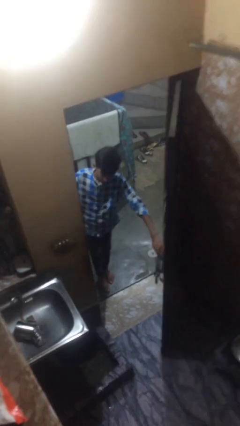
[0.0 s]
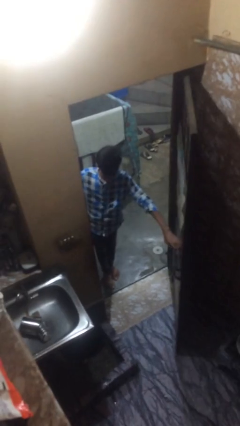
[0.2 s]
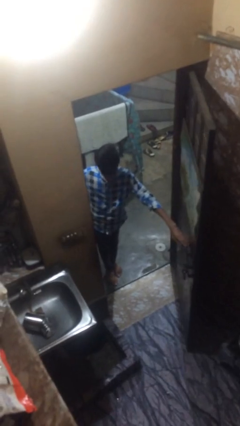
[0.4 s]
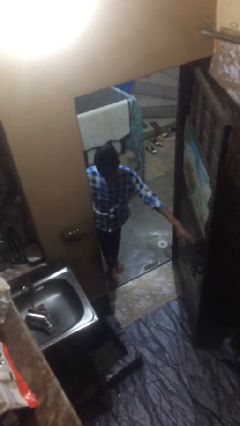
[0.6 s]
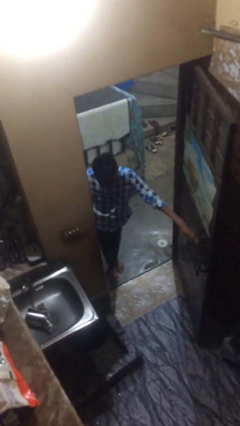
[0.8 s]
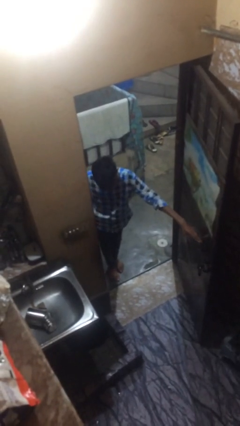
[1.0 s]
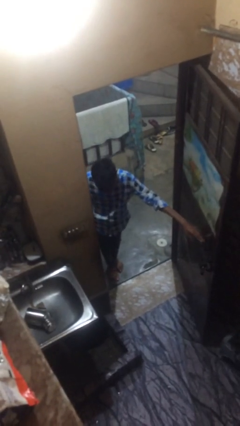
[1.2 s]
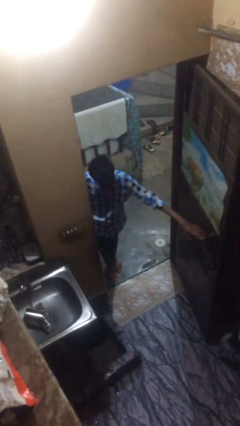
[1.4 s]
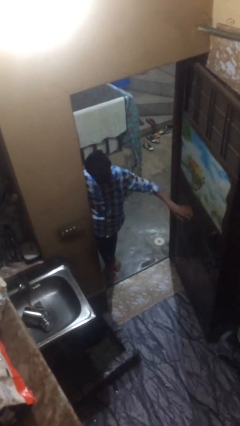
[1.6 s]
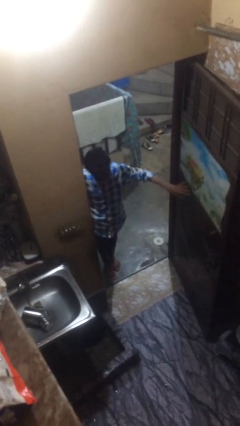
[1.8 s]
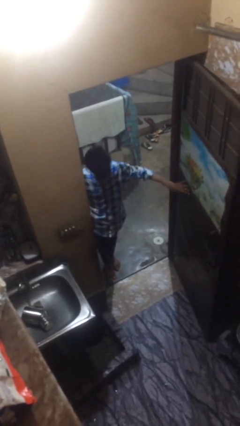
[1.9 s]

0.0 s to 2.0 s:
person opens facility door

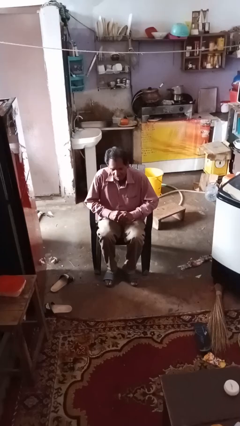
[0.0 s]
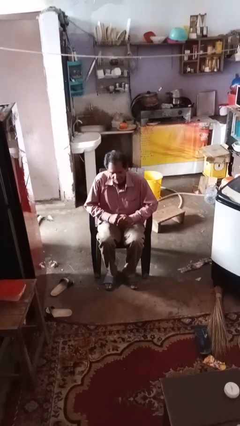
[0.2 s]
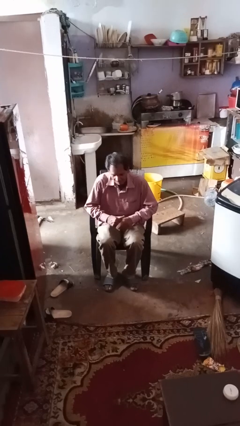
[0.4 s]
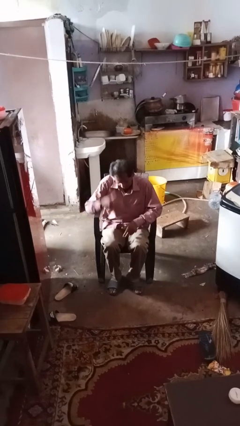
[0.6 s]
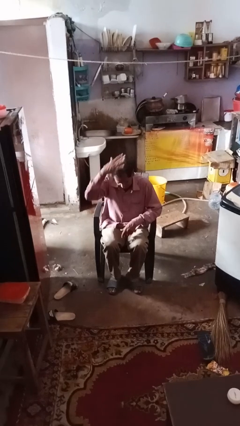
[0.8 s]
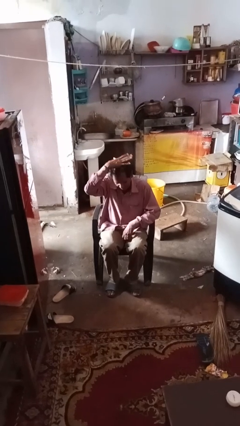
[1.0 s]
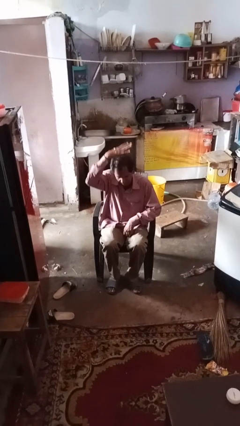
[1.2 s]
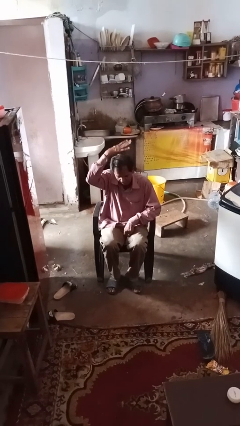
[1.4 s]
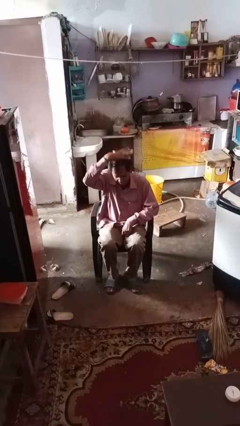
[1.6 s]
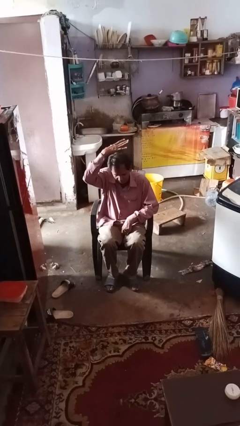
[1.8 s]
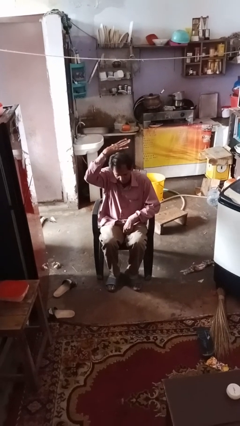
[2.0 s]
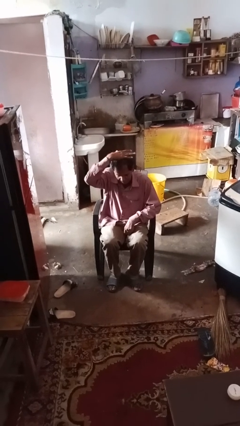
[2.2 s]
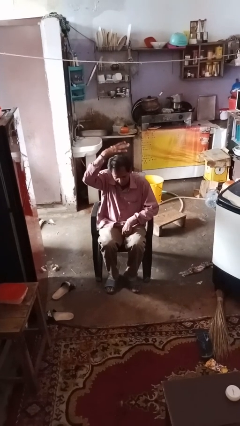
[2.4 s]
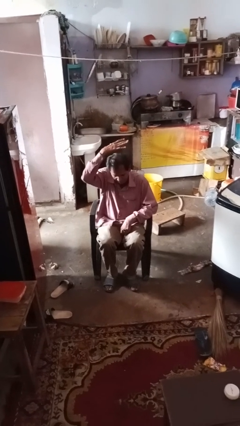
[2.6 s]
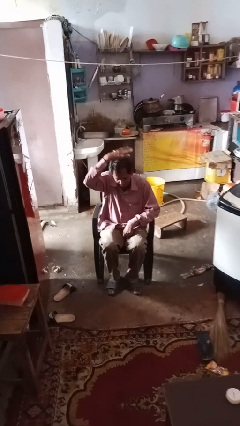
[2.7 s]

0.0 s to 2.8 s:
person holds object above head

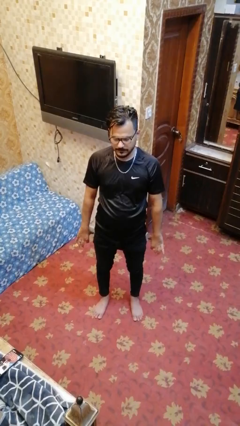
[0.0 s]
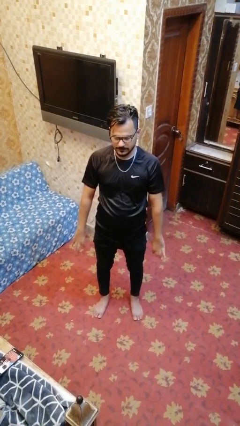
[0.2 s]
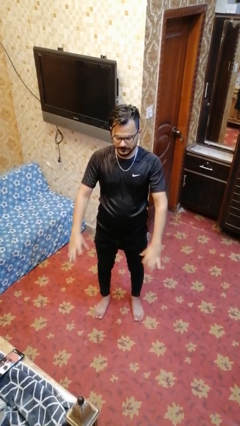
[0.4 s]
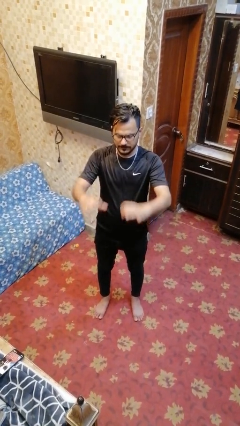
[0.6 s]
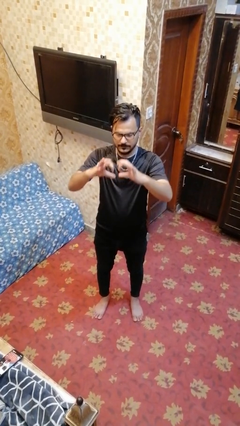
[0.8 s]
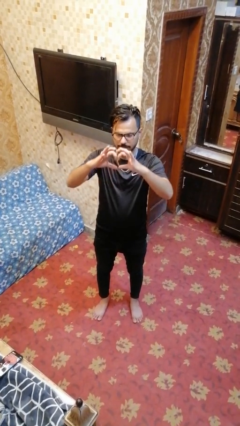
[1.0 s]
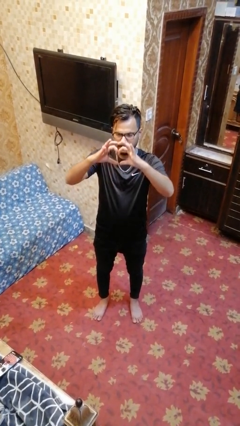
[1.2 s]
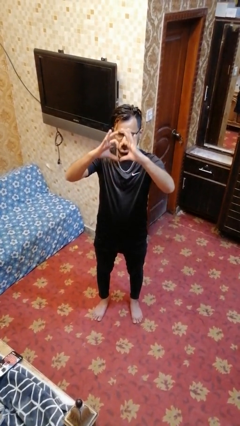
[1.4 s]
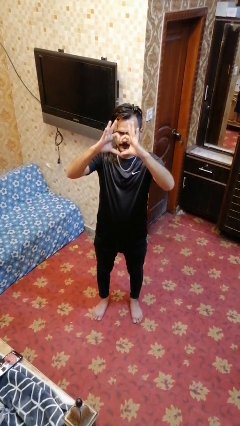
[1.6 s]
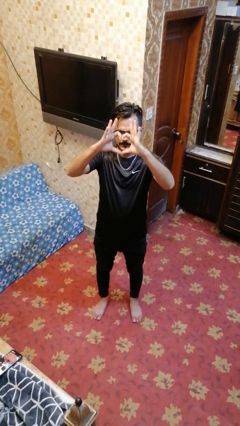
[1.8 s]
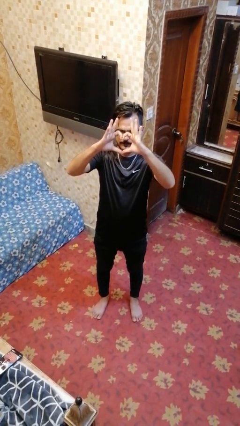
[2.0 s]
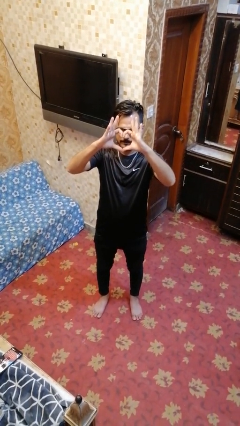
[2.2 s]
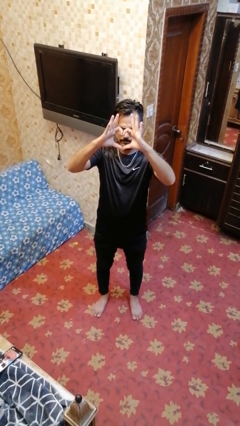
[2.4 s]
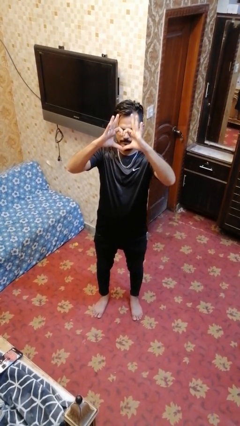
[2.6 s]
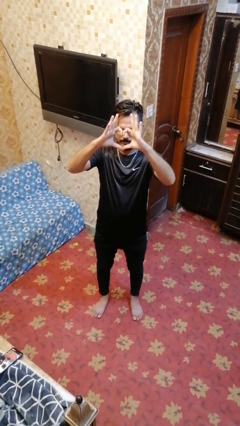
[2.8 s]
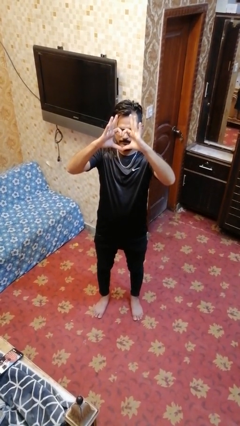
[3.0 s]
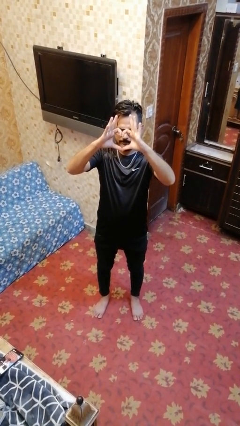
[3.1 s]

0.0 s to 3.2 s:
person gestures heart

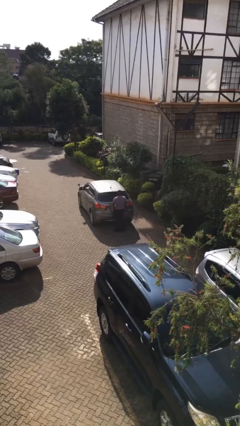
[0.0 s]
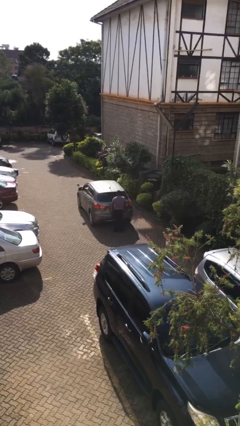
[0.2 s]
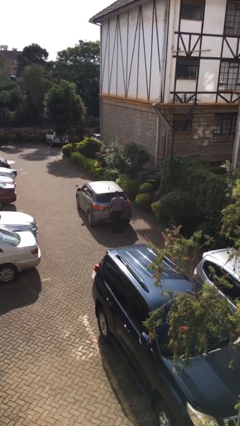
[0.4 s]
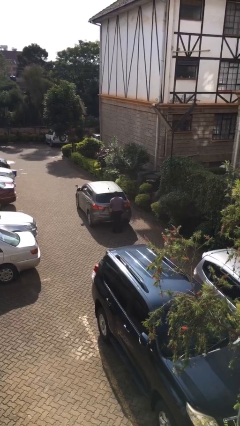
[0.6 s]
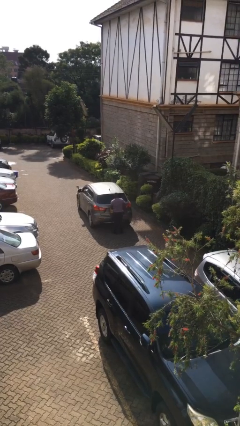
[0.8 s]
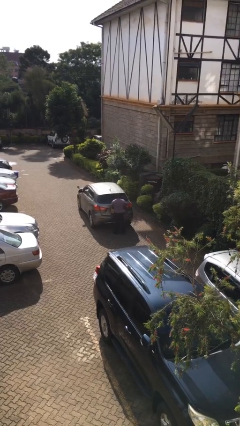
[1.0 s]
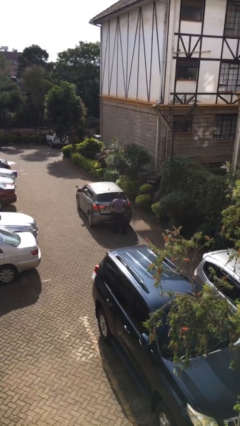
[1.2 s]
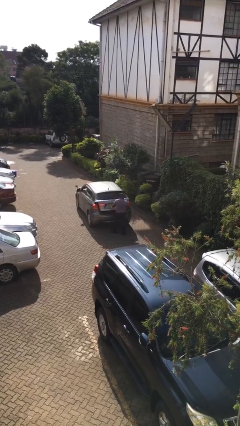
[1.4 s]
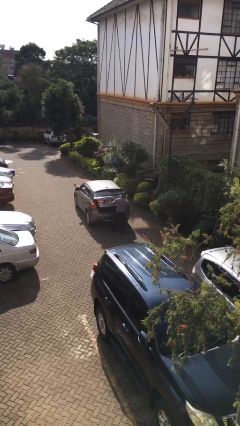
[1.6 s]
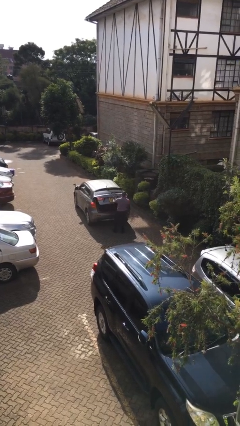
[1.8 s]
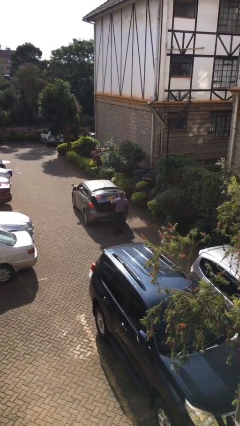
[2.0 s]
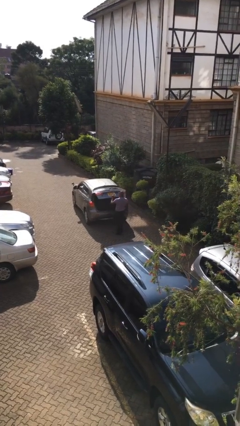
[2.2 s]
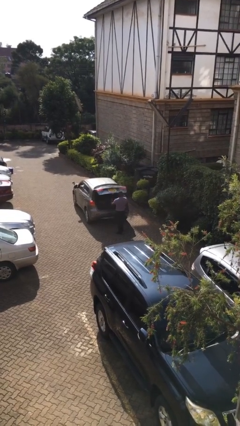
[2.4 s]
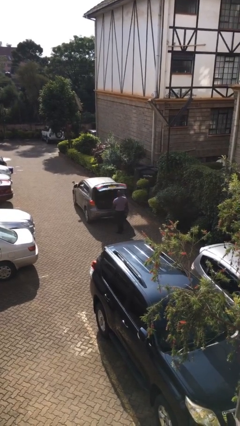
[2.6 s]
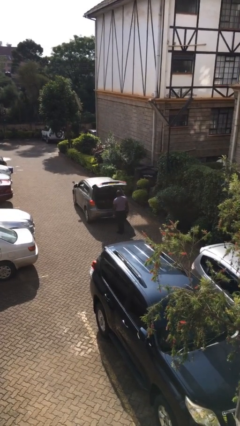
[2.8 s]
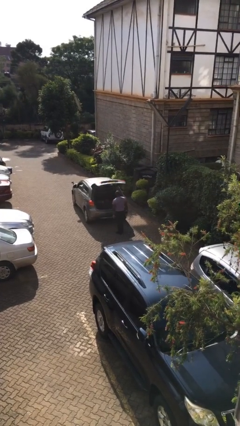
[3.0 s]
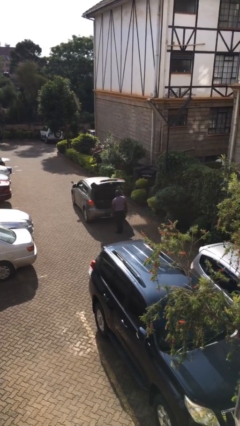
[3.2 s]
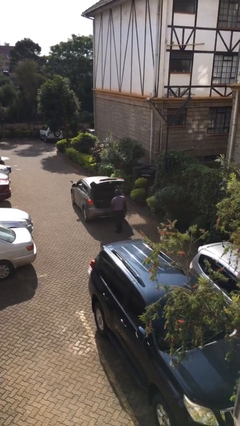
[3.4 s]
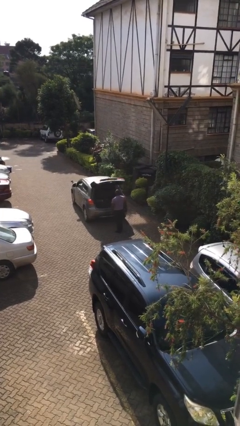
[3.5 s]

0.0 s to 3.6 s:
person opens car trunk

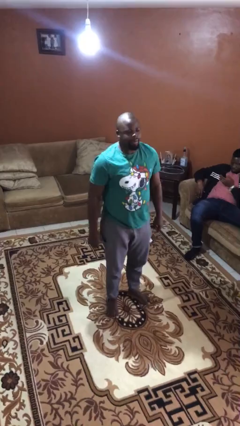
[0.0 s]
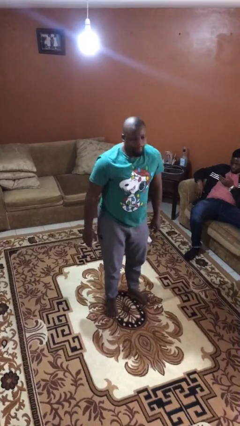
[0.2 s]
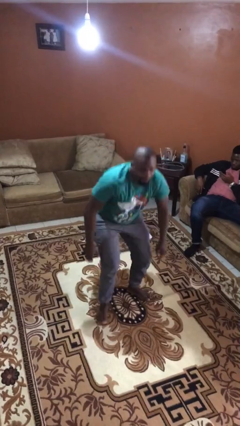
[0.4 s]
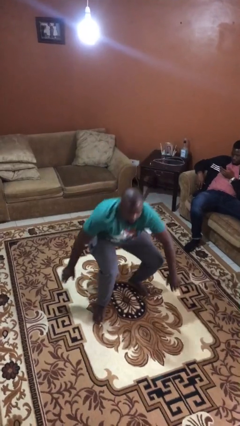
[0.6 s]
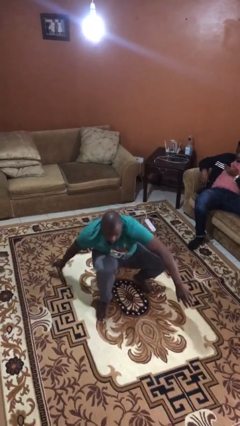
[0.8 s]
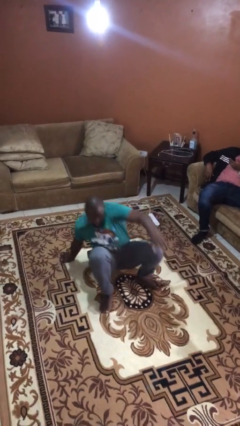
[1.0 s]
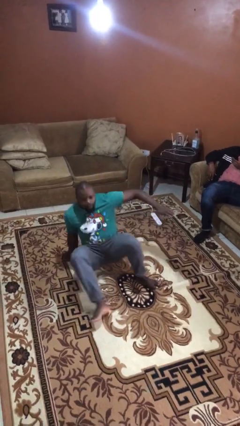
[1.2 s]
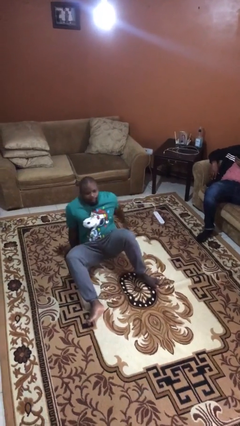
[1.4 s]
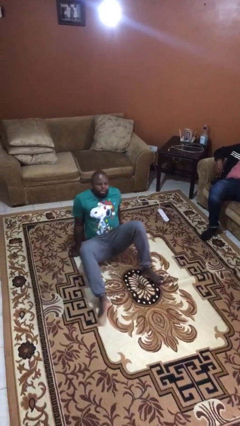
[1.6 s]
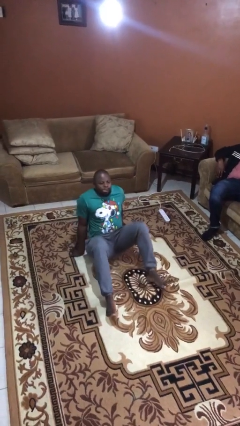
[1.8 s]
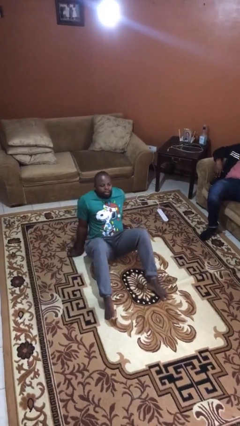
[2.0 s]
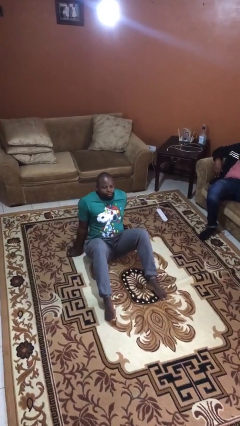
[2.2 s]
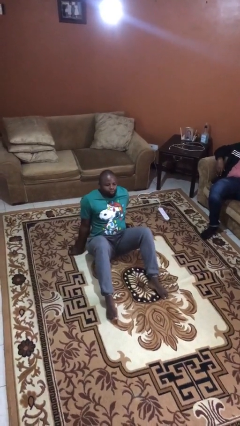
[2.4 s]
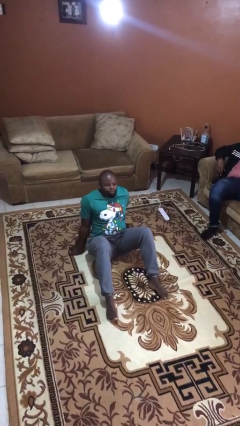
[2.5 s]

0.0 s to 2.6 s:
person sits down

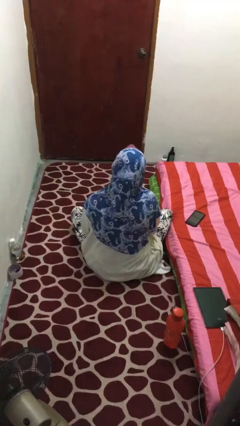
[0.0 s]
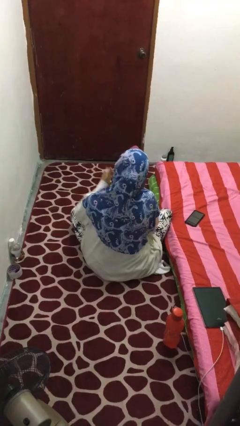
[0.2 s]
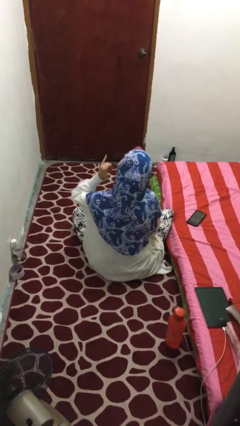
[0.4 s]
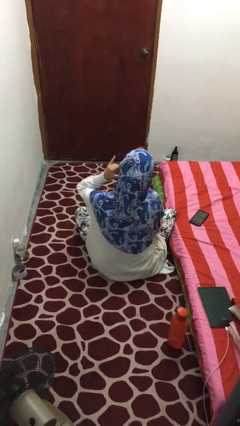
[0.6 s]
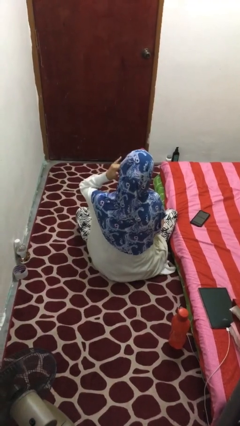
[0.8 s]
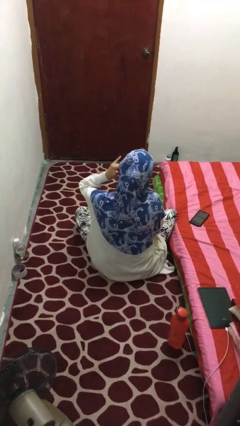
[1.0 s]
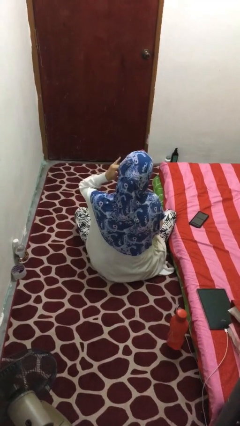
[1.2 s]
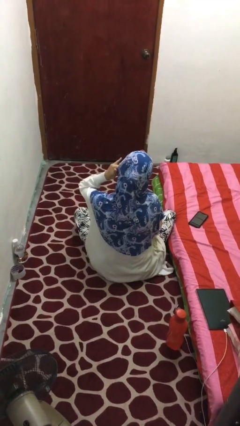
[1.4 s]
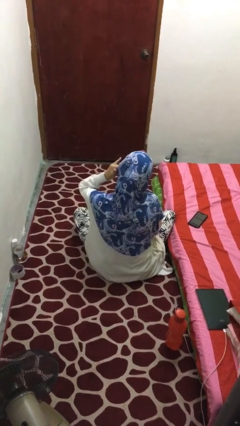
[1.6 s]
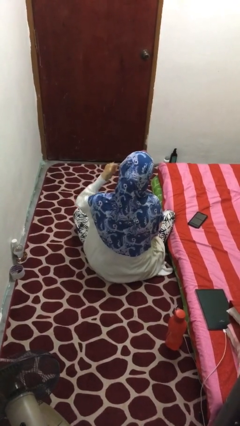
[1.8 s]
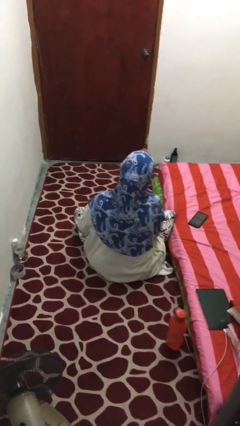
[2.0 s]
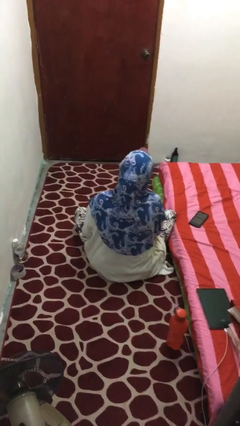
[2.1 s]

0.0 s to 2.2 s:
person gestures call me

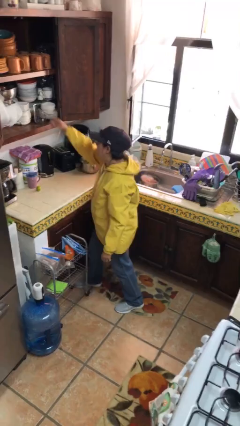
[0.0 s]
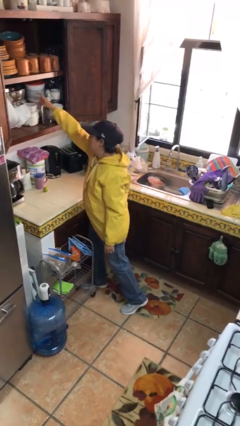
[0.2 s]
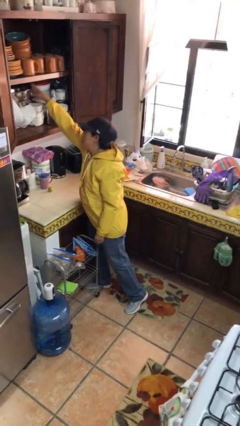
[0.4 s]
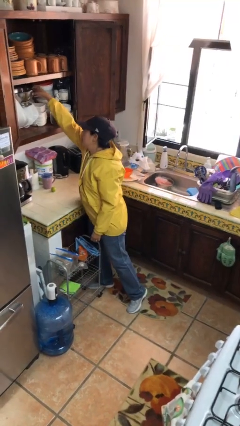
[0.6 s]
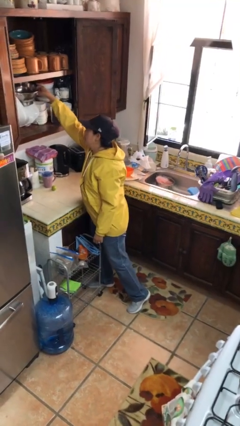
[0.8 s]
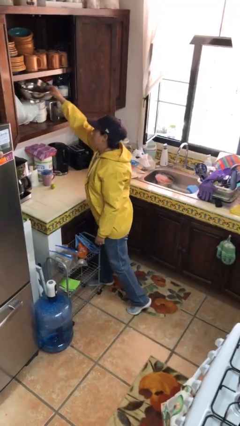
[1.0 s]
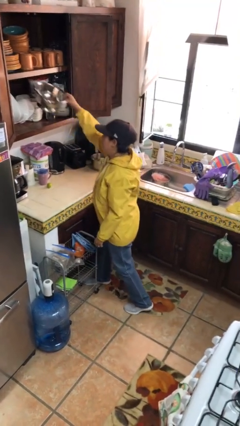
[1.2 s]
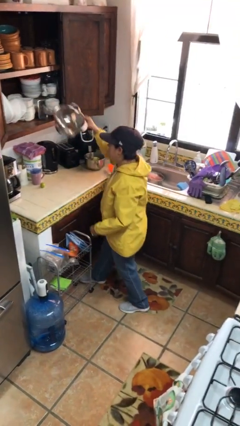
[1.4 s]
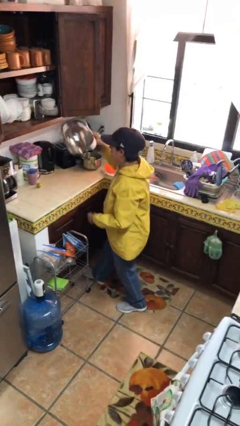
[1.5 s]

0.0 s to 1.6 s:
person picks up object from cabinet
